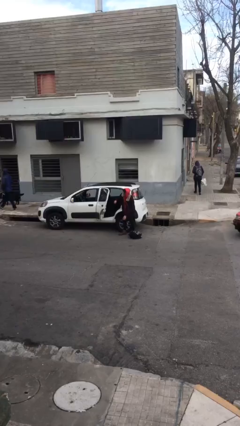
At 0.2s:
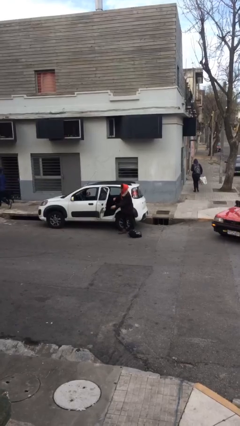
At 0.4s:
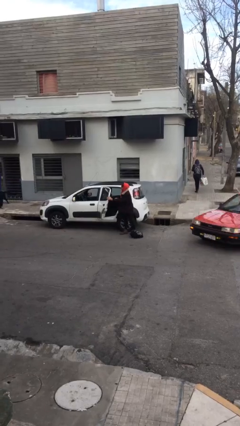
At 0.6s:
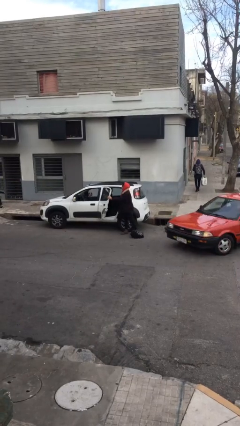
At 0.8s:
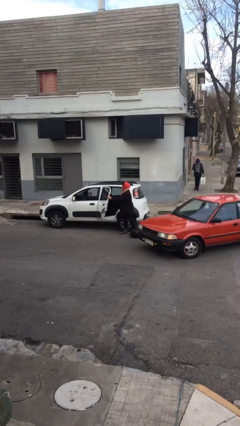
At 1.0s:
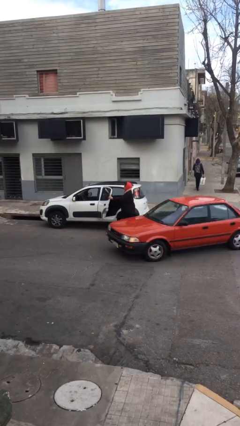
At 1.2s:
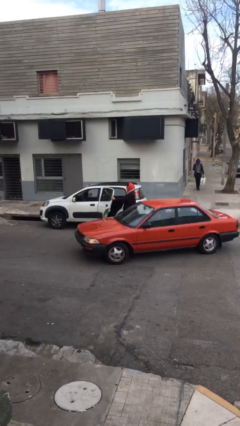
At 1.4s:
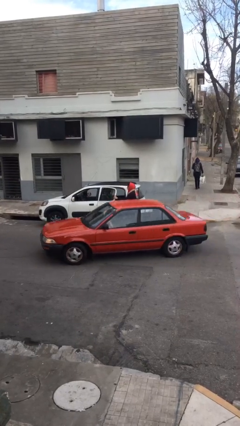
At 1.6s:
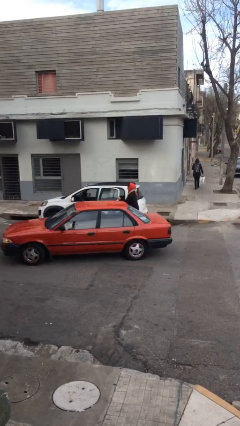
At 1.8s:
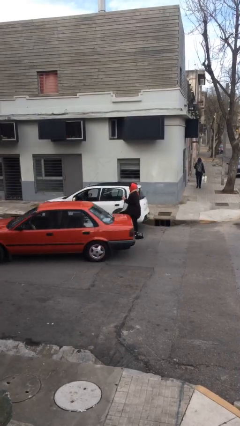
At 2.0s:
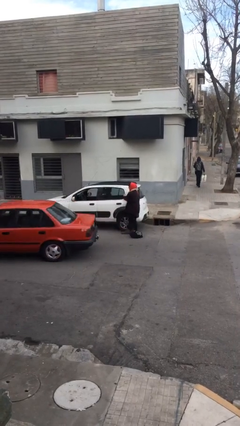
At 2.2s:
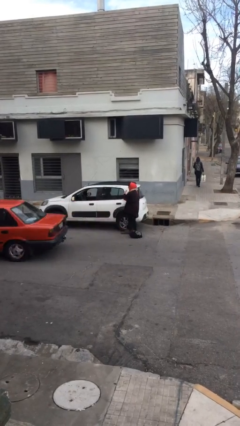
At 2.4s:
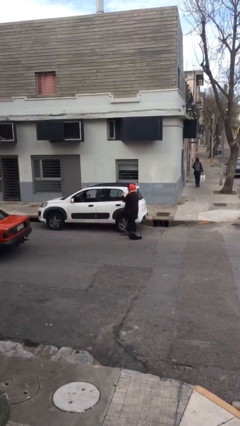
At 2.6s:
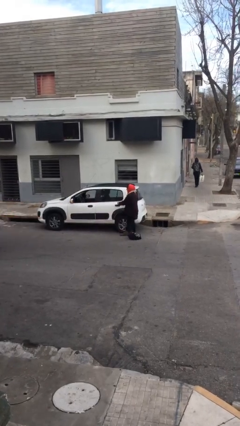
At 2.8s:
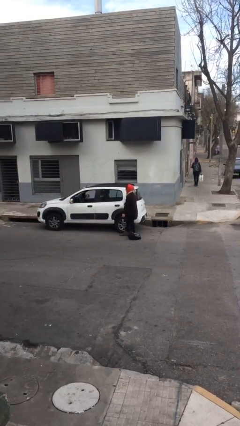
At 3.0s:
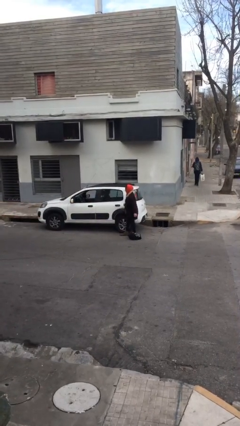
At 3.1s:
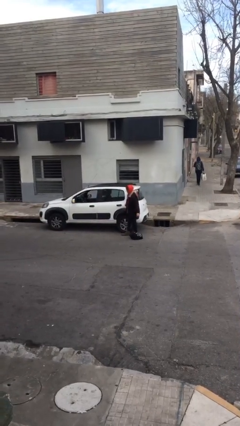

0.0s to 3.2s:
person closes car door

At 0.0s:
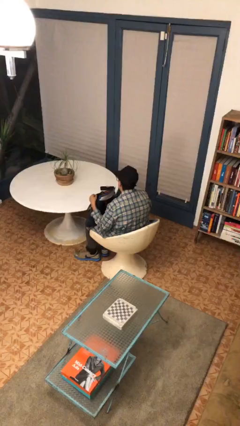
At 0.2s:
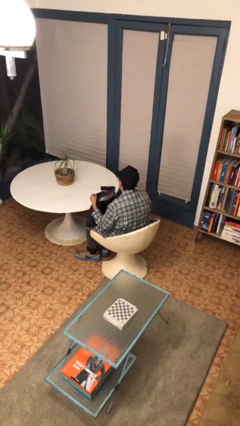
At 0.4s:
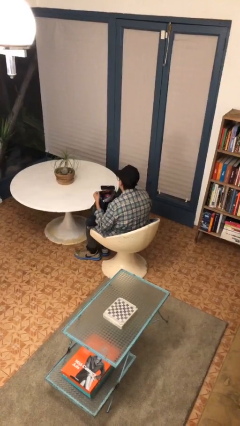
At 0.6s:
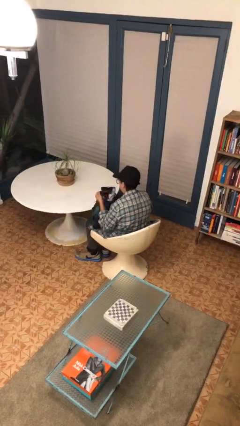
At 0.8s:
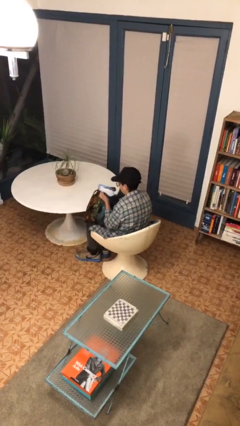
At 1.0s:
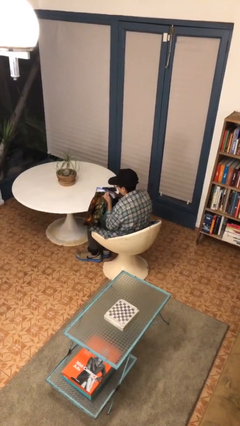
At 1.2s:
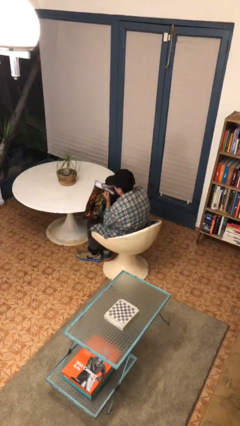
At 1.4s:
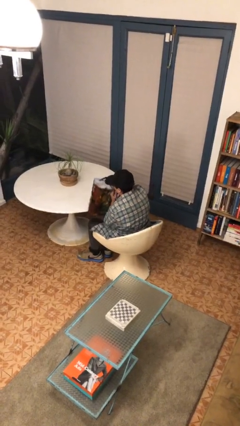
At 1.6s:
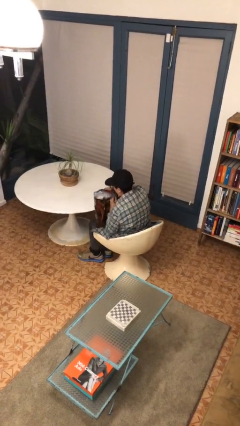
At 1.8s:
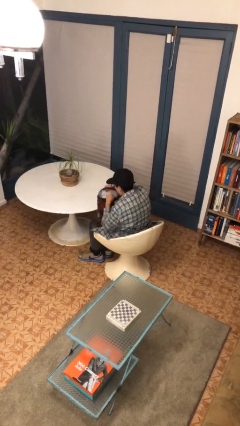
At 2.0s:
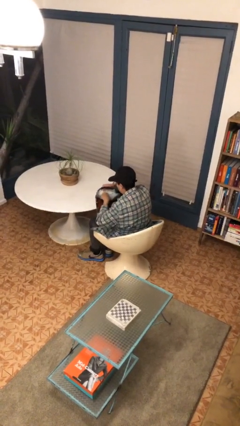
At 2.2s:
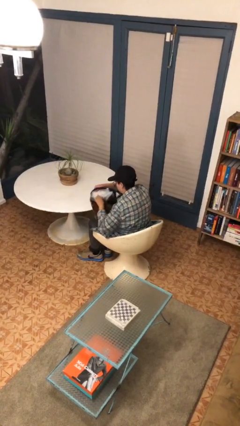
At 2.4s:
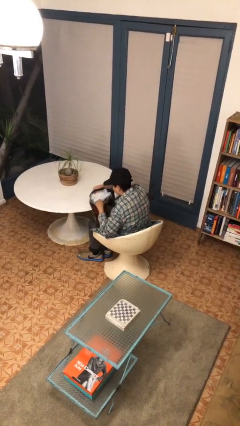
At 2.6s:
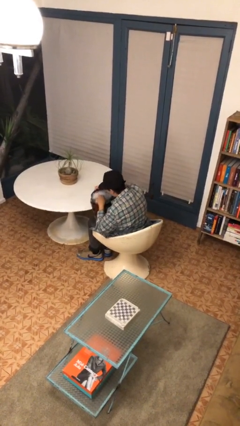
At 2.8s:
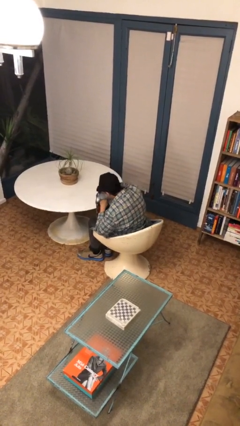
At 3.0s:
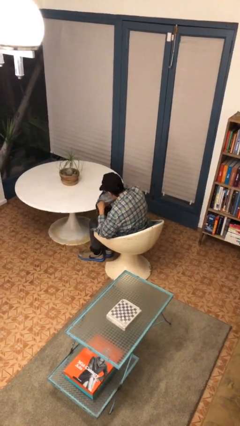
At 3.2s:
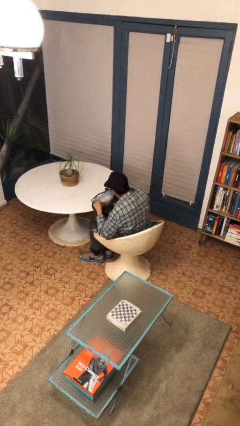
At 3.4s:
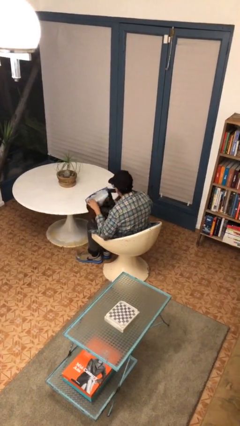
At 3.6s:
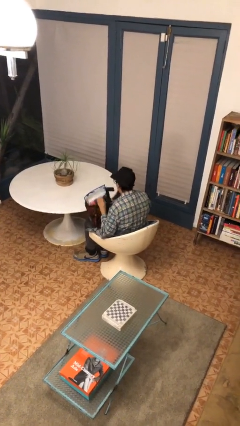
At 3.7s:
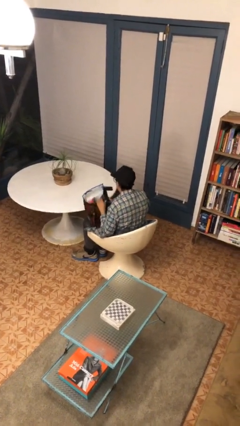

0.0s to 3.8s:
person searches in bag

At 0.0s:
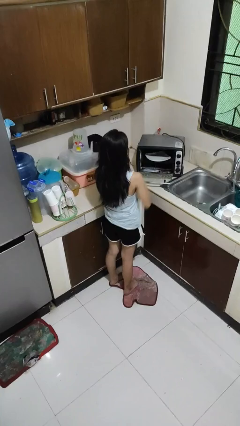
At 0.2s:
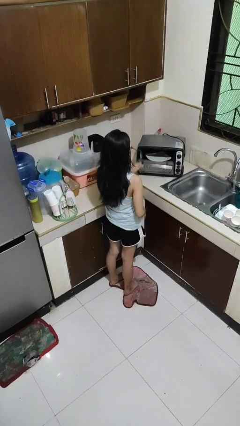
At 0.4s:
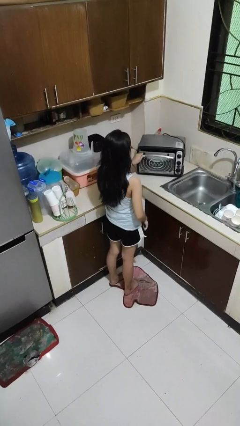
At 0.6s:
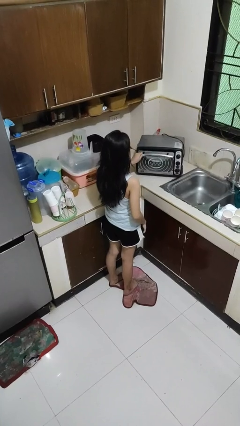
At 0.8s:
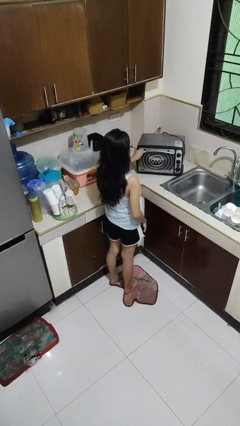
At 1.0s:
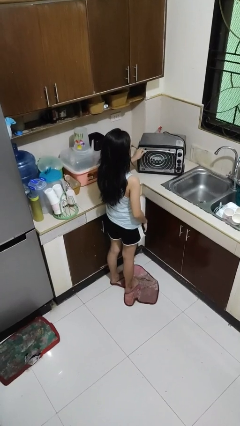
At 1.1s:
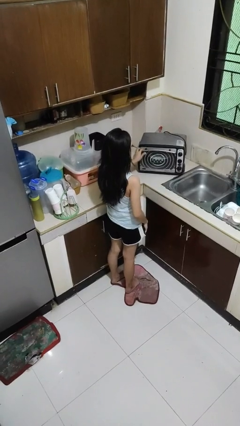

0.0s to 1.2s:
person closes microwave

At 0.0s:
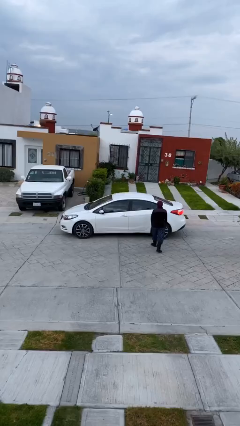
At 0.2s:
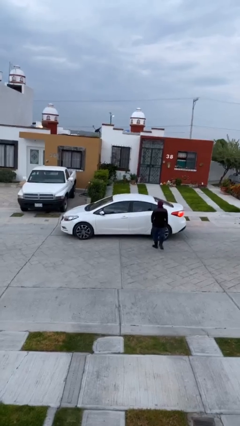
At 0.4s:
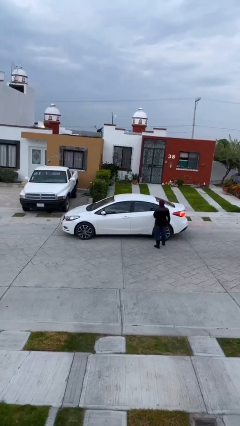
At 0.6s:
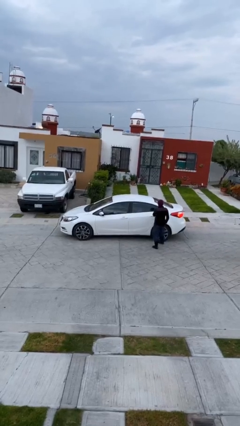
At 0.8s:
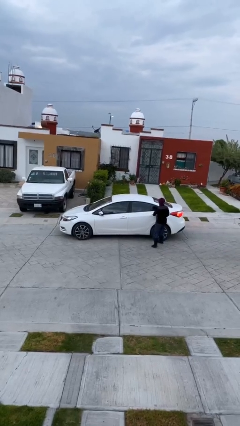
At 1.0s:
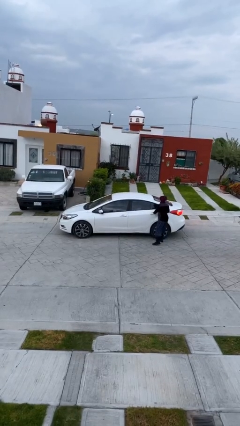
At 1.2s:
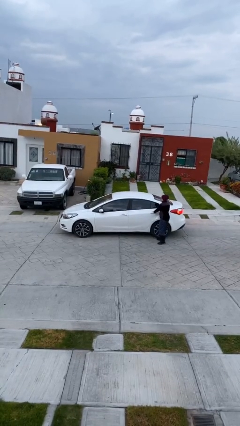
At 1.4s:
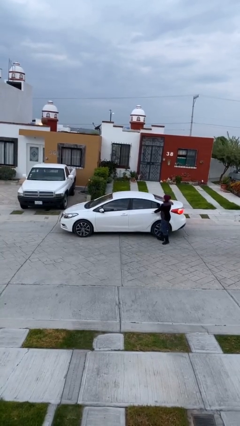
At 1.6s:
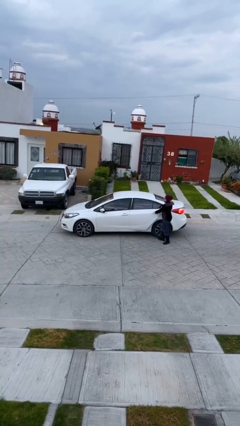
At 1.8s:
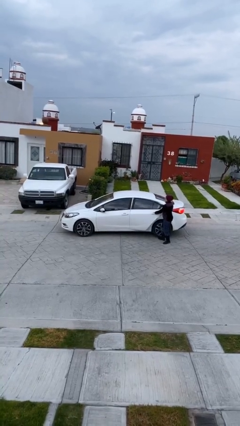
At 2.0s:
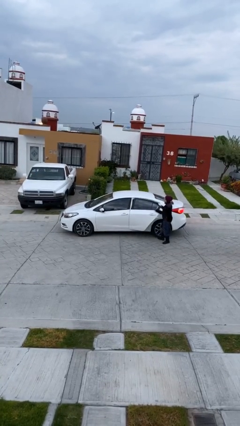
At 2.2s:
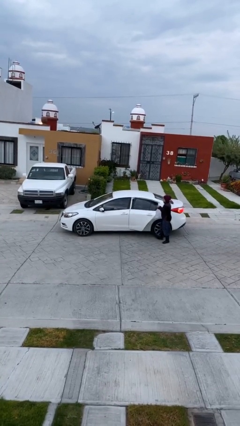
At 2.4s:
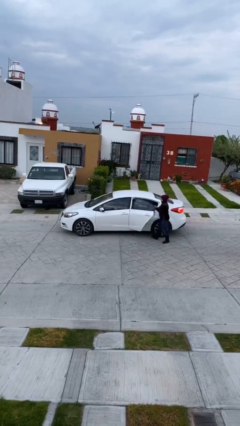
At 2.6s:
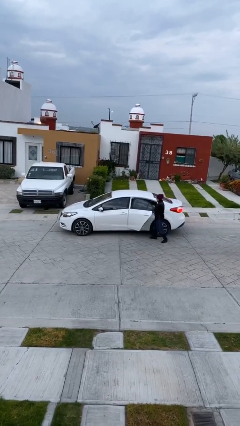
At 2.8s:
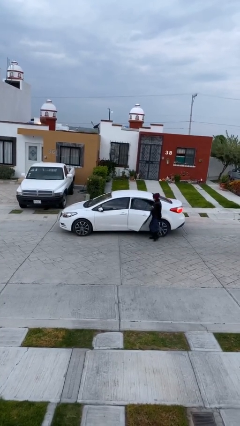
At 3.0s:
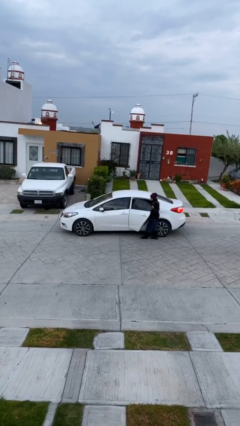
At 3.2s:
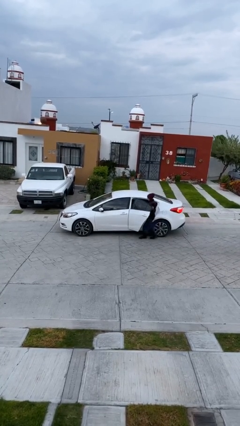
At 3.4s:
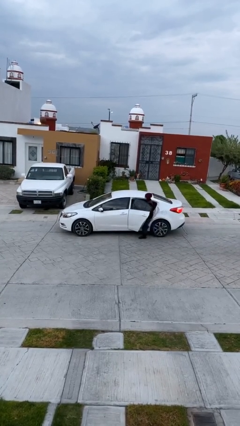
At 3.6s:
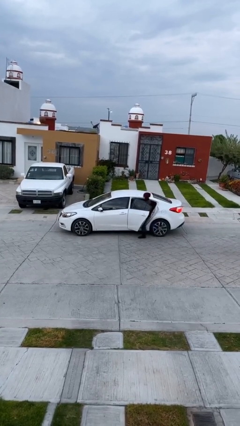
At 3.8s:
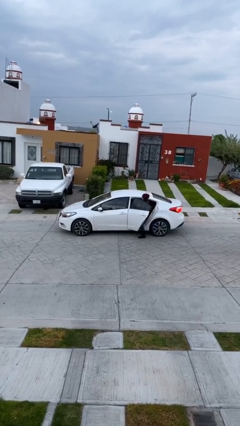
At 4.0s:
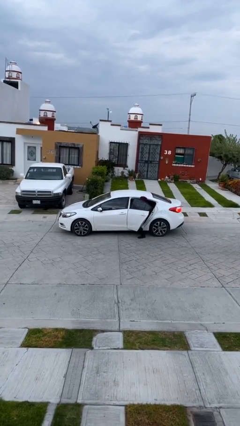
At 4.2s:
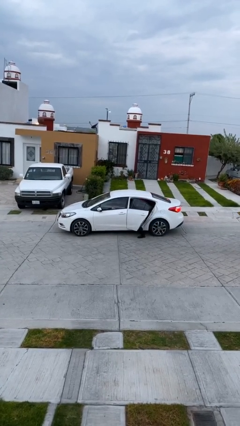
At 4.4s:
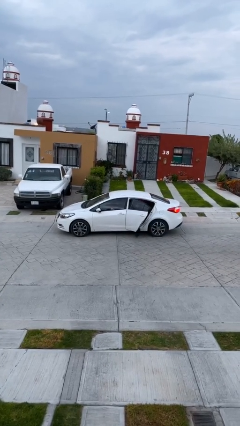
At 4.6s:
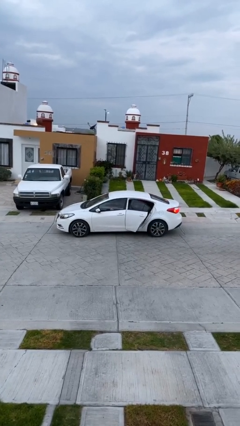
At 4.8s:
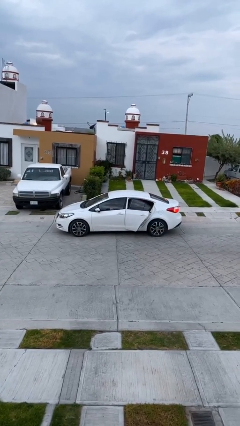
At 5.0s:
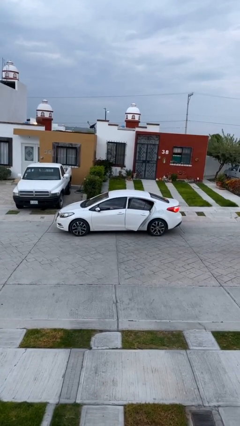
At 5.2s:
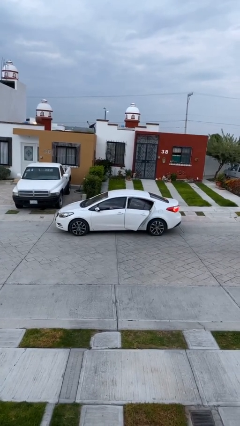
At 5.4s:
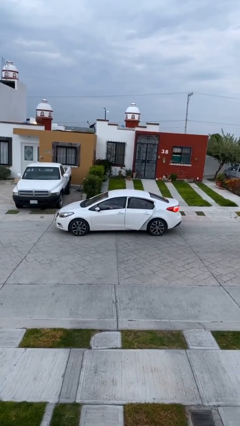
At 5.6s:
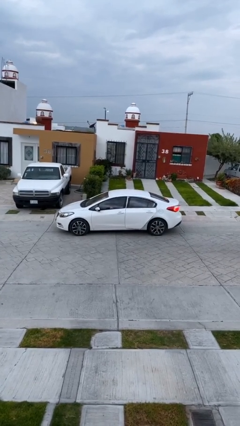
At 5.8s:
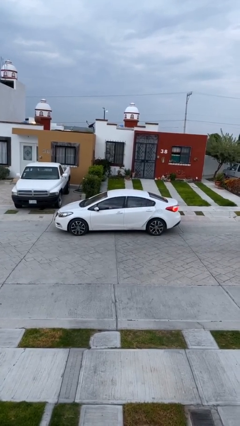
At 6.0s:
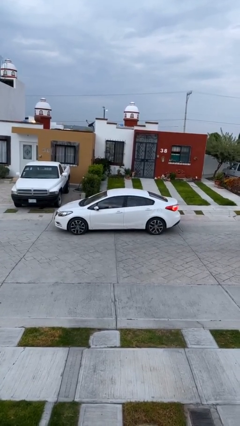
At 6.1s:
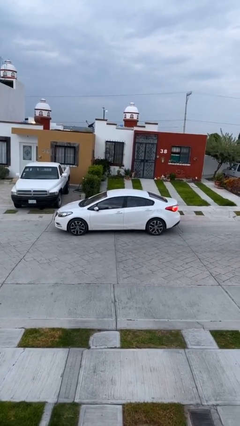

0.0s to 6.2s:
car picks up person

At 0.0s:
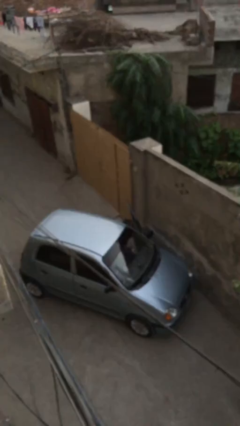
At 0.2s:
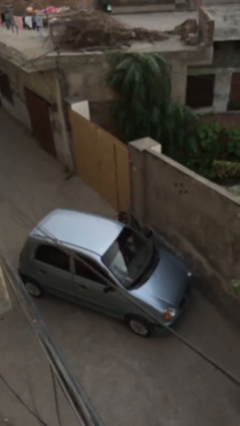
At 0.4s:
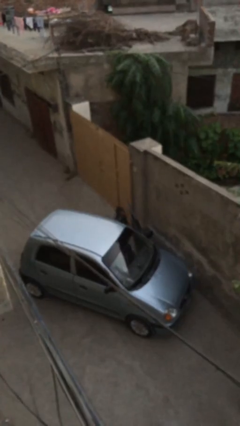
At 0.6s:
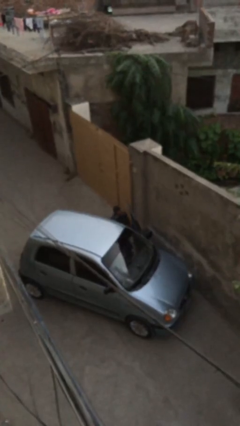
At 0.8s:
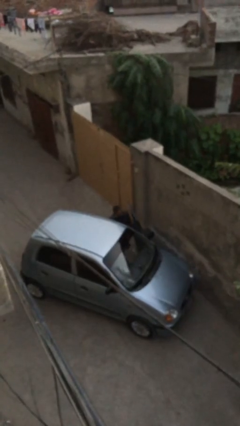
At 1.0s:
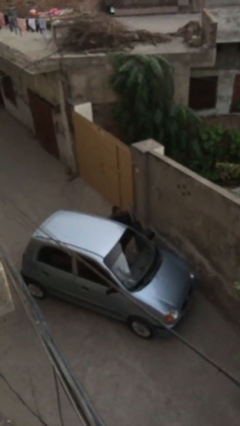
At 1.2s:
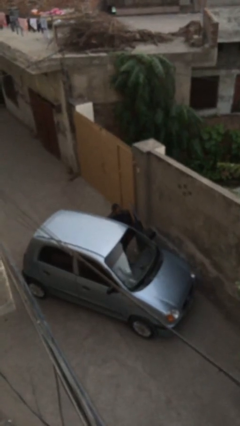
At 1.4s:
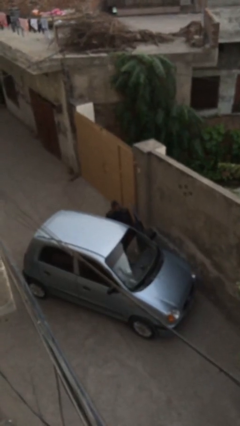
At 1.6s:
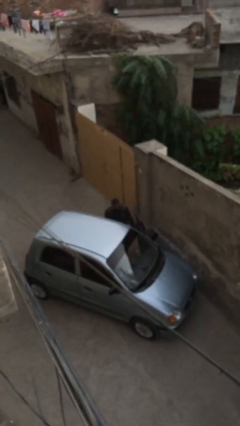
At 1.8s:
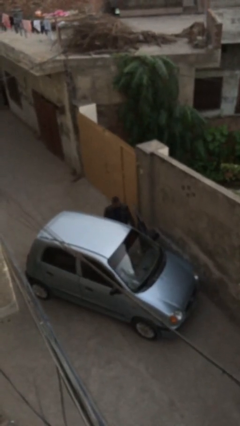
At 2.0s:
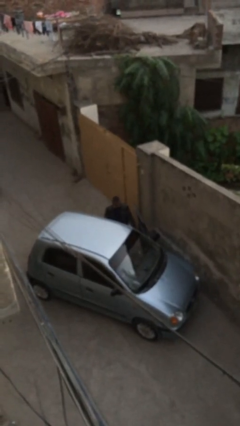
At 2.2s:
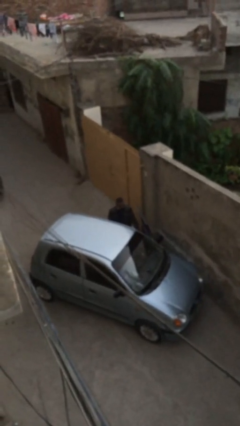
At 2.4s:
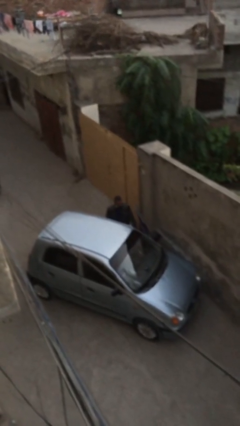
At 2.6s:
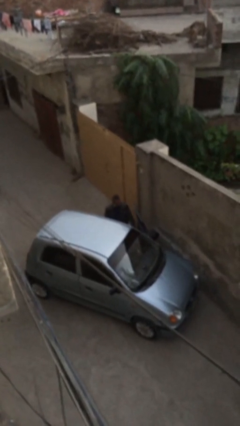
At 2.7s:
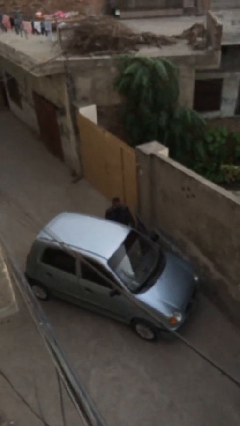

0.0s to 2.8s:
person exits car

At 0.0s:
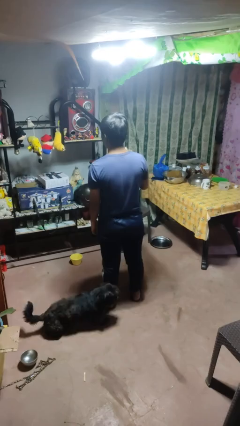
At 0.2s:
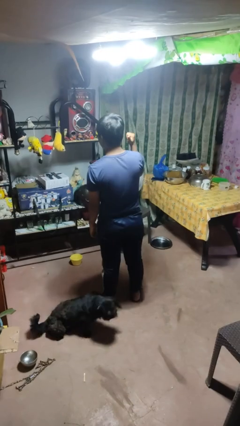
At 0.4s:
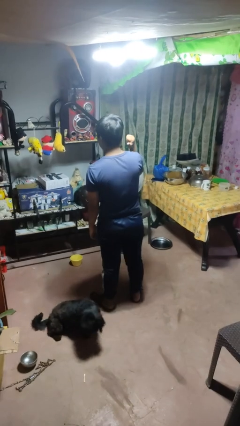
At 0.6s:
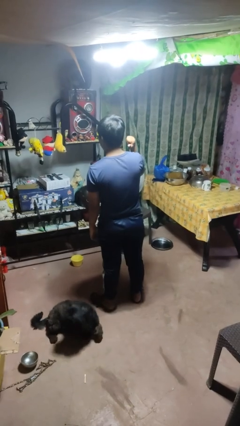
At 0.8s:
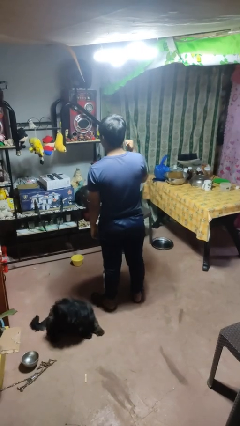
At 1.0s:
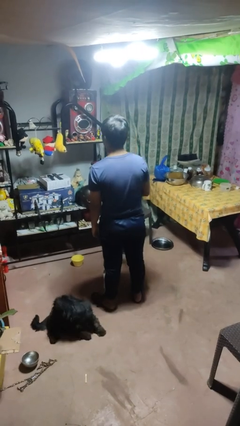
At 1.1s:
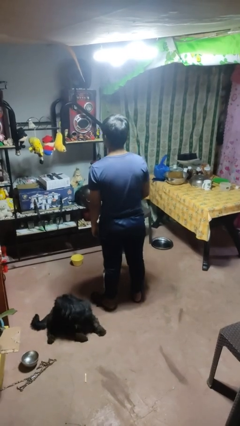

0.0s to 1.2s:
person gestures behind me
